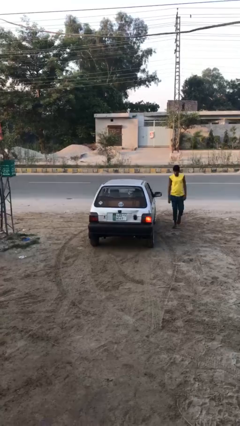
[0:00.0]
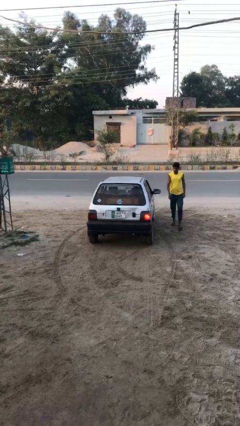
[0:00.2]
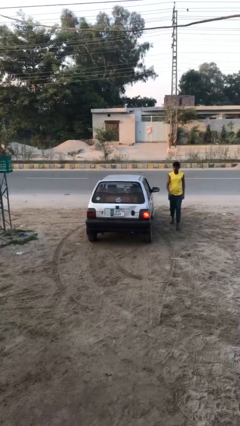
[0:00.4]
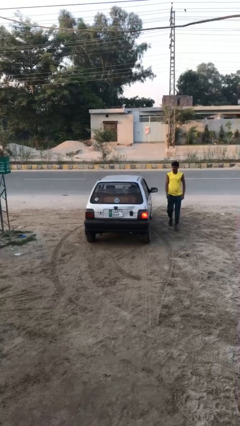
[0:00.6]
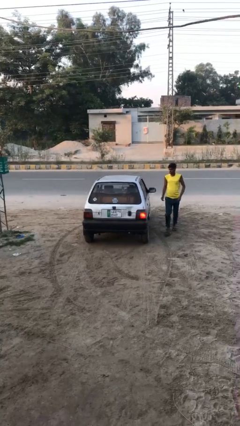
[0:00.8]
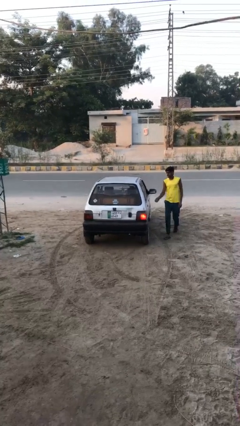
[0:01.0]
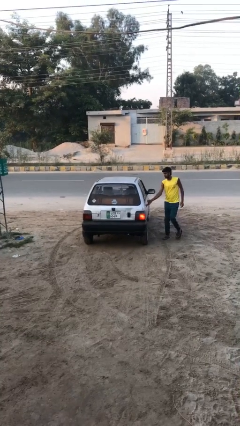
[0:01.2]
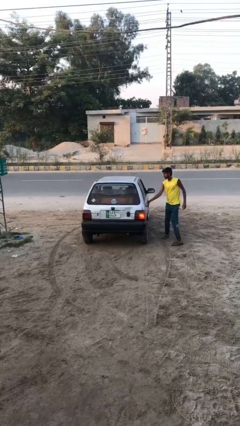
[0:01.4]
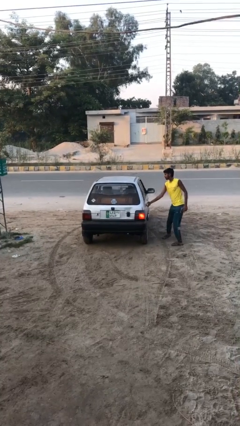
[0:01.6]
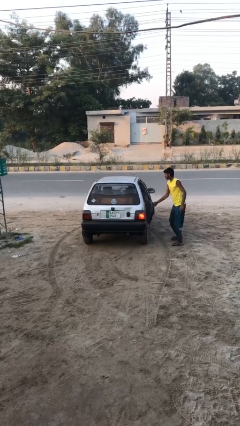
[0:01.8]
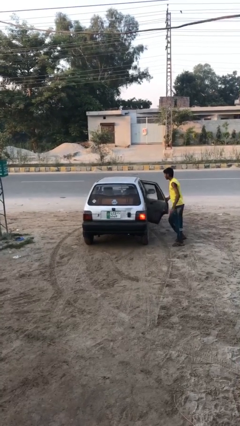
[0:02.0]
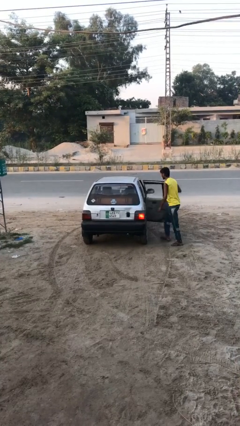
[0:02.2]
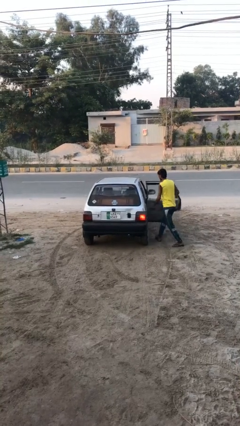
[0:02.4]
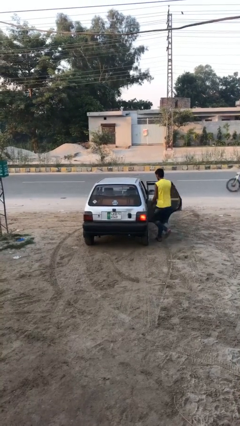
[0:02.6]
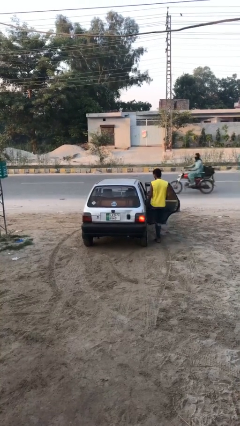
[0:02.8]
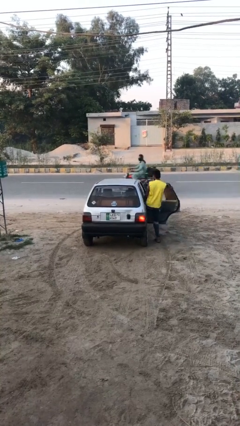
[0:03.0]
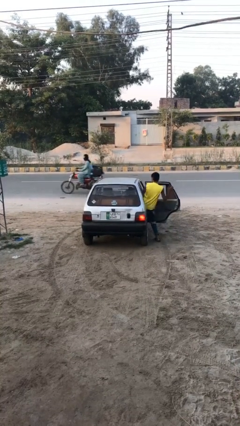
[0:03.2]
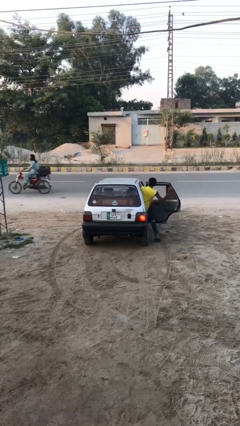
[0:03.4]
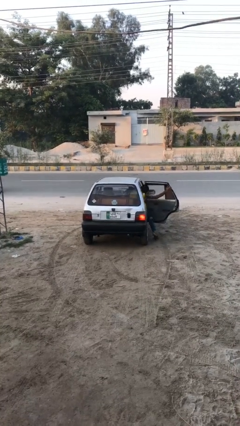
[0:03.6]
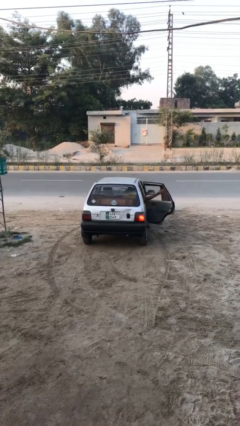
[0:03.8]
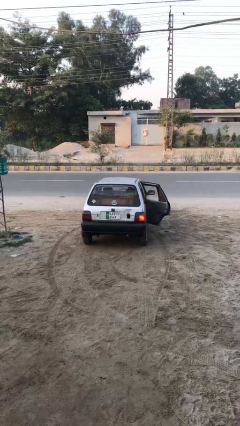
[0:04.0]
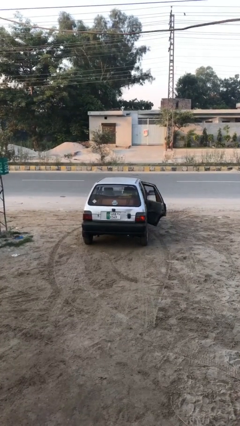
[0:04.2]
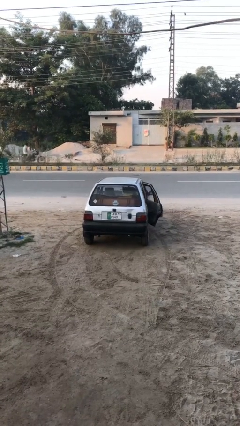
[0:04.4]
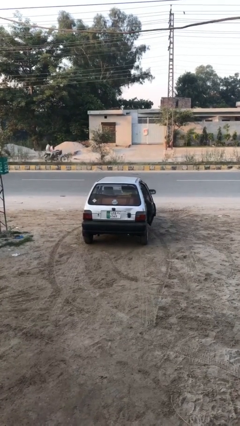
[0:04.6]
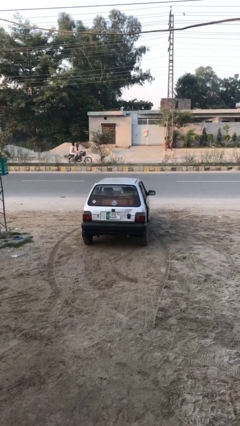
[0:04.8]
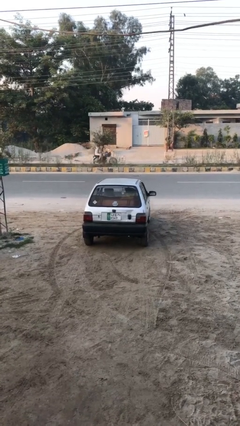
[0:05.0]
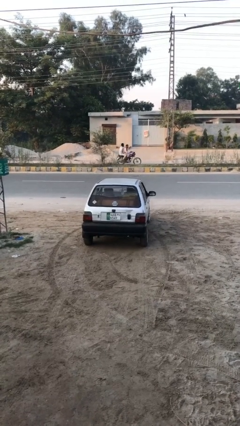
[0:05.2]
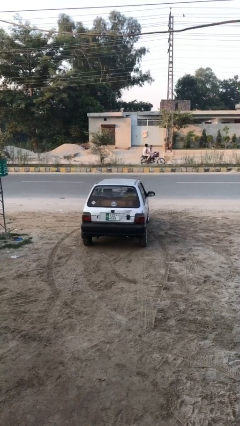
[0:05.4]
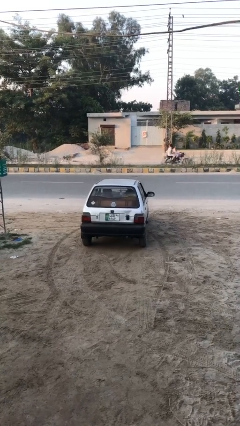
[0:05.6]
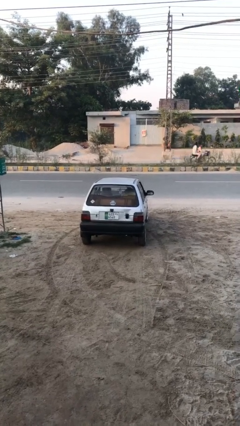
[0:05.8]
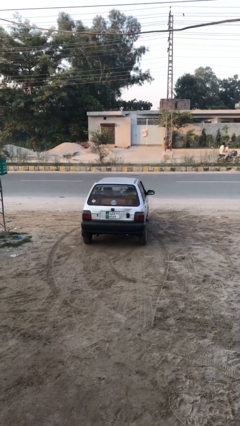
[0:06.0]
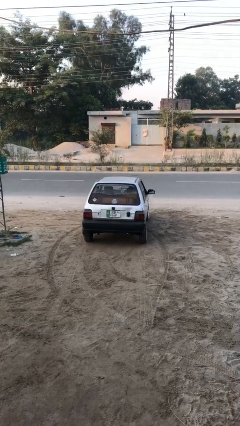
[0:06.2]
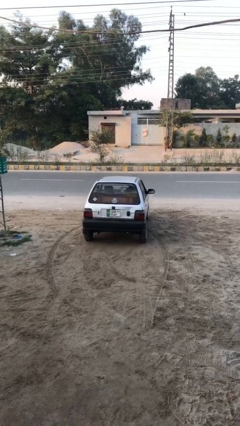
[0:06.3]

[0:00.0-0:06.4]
car picks up person

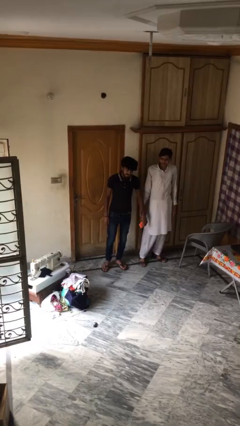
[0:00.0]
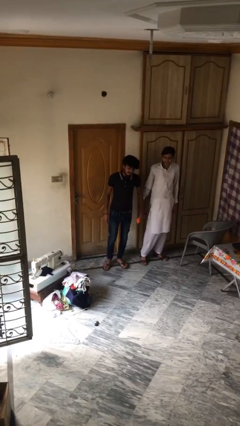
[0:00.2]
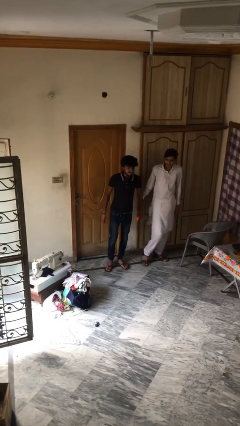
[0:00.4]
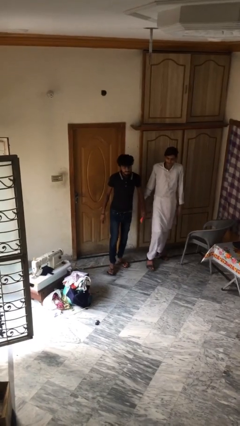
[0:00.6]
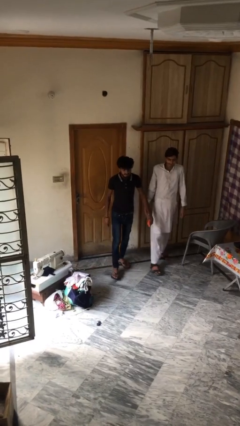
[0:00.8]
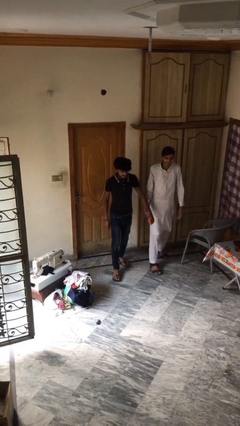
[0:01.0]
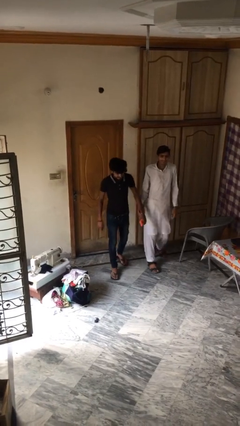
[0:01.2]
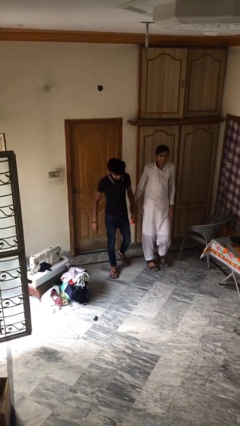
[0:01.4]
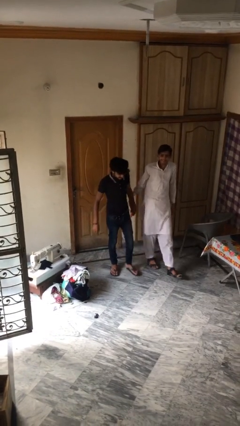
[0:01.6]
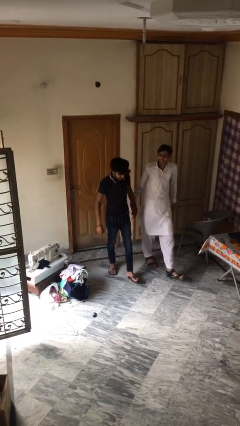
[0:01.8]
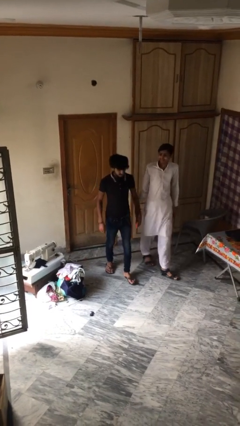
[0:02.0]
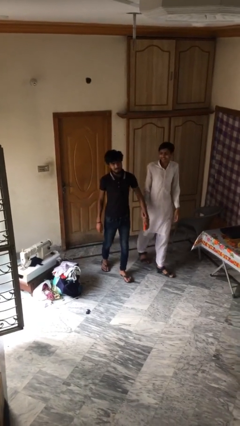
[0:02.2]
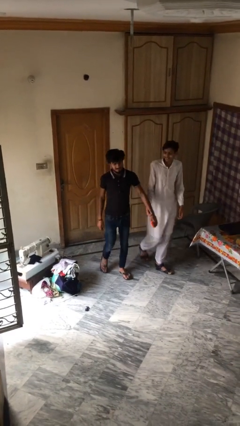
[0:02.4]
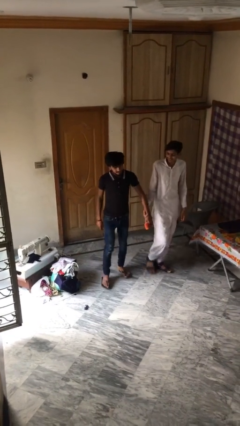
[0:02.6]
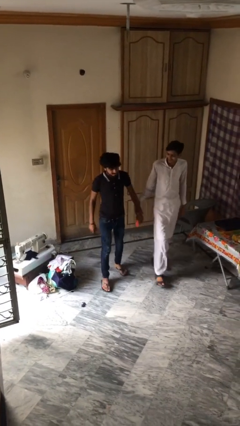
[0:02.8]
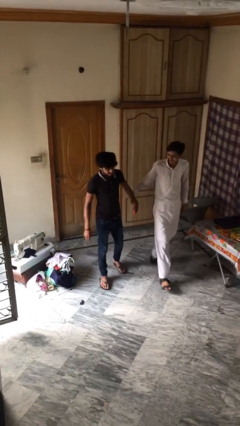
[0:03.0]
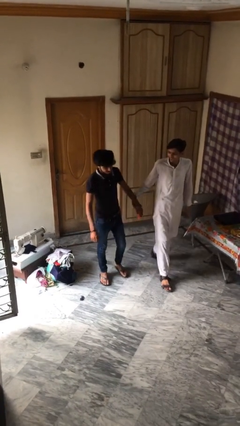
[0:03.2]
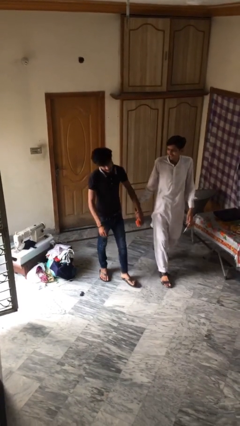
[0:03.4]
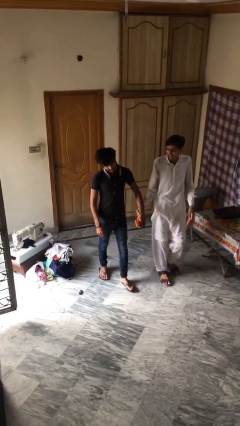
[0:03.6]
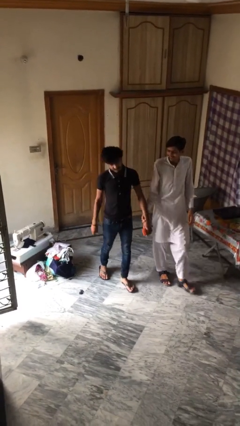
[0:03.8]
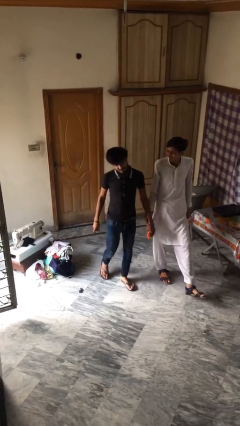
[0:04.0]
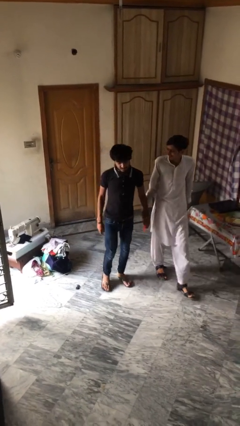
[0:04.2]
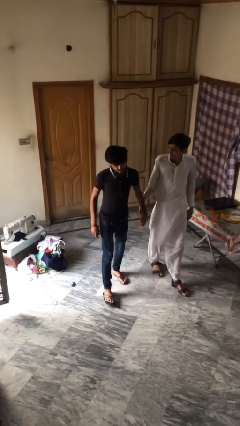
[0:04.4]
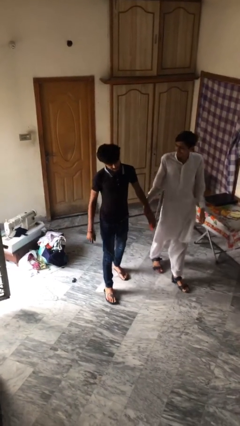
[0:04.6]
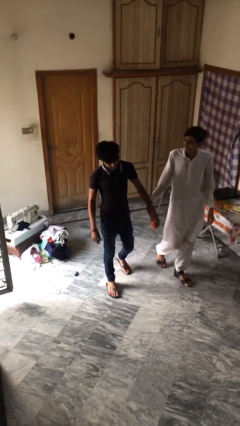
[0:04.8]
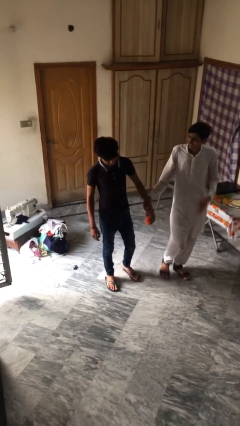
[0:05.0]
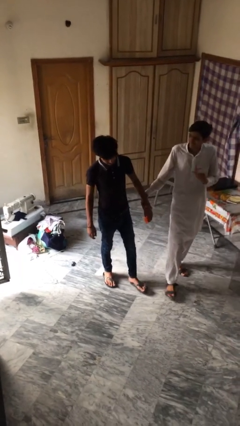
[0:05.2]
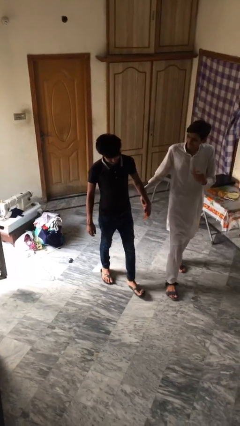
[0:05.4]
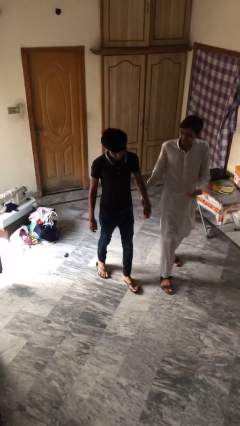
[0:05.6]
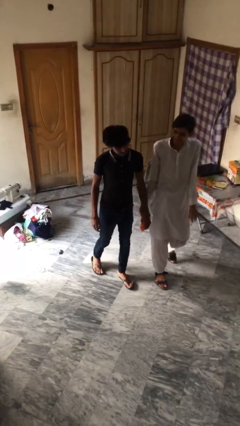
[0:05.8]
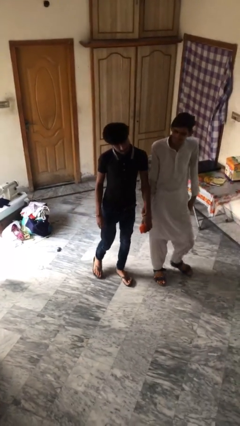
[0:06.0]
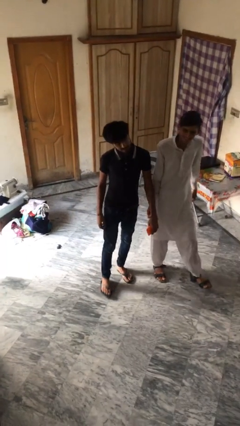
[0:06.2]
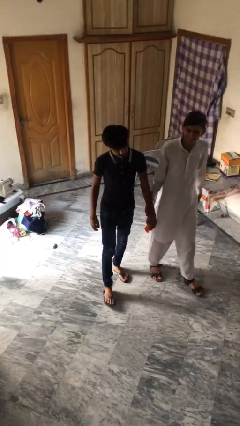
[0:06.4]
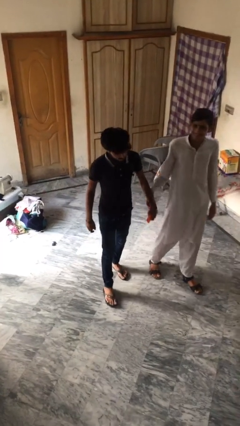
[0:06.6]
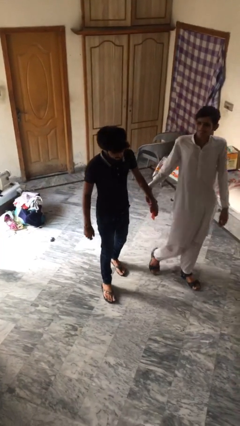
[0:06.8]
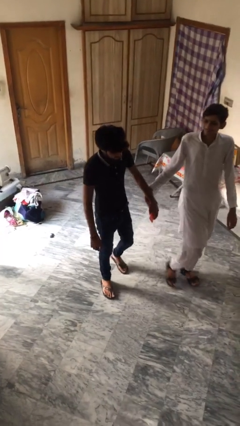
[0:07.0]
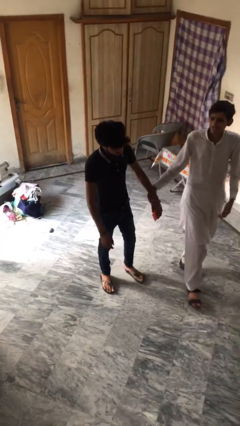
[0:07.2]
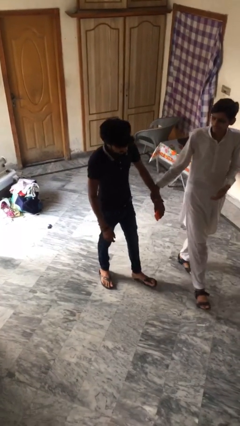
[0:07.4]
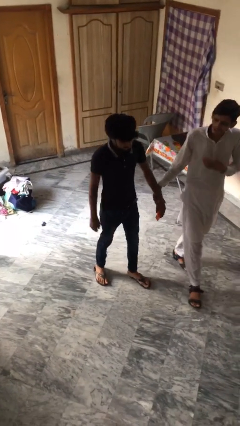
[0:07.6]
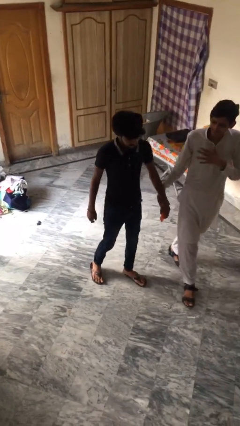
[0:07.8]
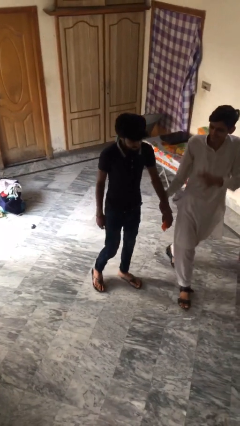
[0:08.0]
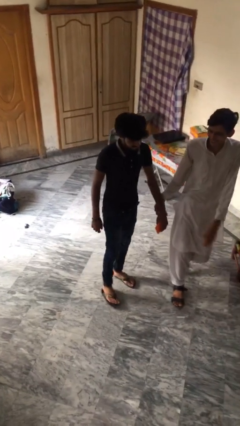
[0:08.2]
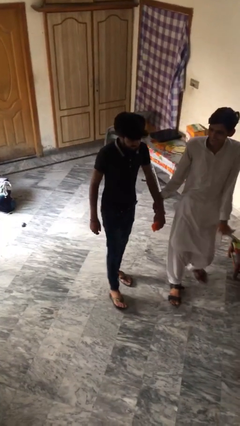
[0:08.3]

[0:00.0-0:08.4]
person holds hand

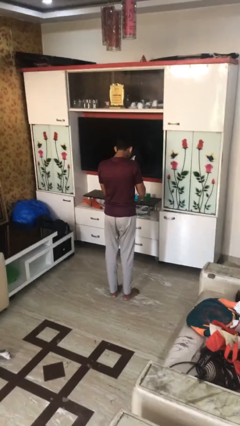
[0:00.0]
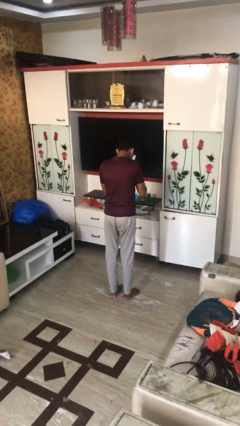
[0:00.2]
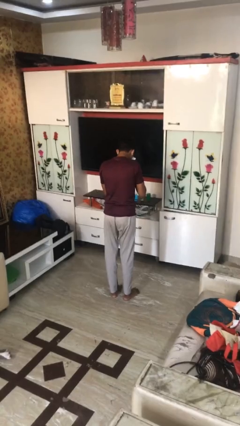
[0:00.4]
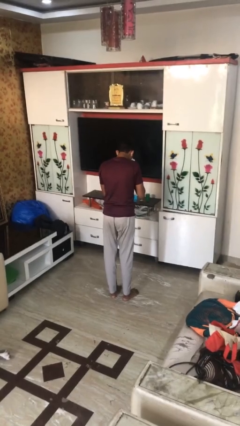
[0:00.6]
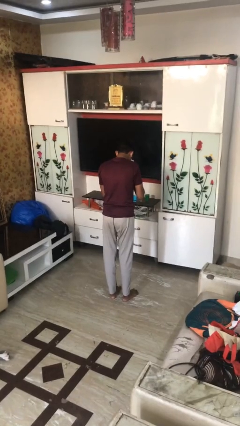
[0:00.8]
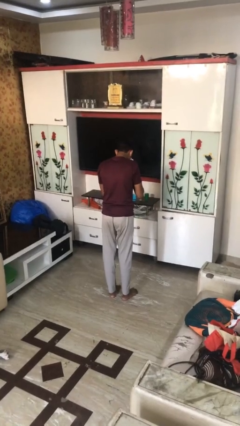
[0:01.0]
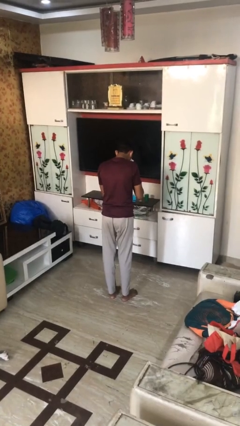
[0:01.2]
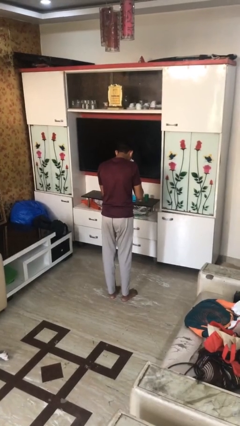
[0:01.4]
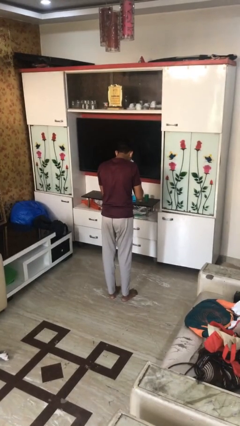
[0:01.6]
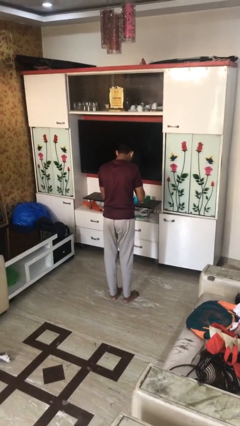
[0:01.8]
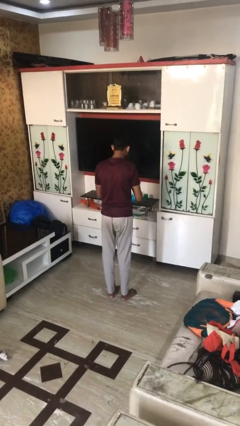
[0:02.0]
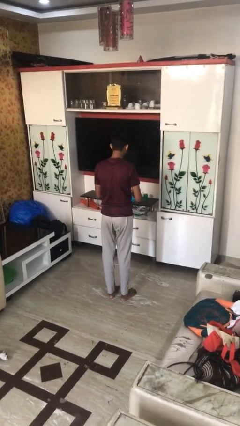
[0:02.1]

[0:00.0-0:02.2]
person blows nose

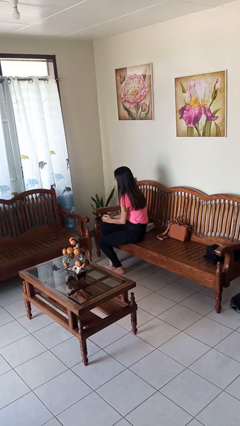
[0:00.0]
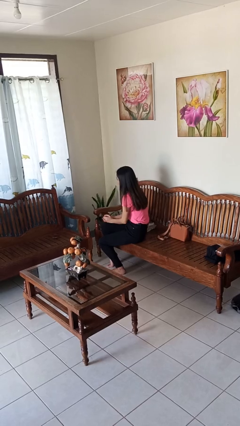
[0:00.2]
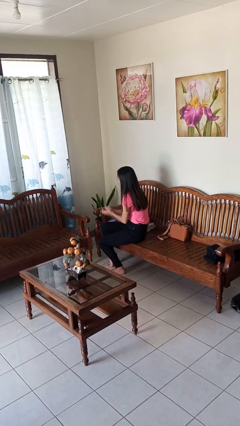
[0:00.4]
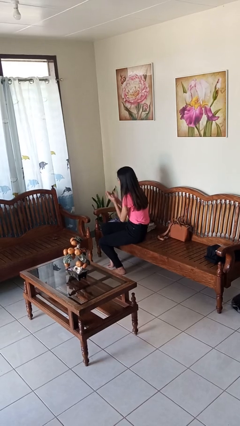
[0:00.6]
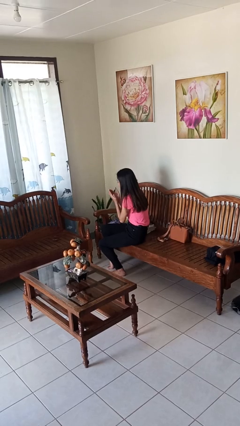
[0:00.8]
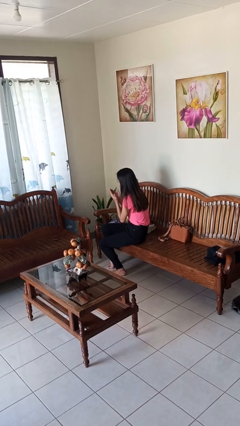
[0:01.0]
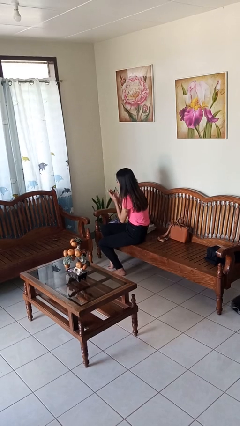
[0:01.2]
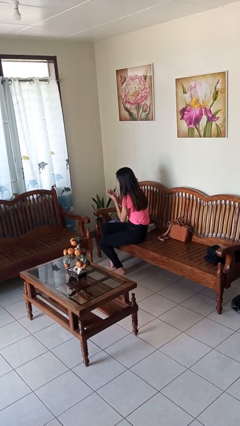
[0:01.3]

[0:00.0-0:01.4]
person blows into hands
